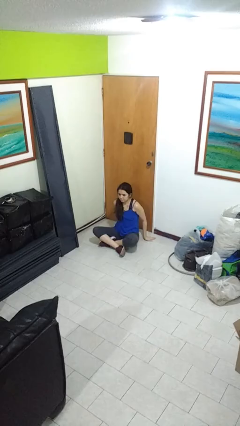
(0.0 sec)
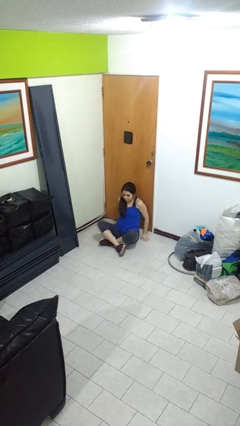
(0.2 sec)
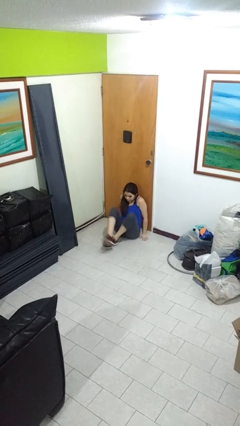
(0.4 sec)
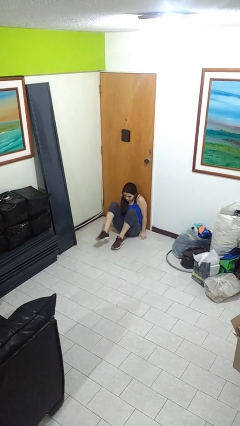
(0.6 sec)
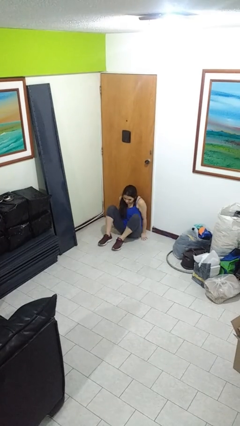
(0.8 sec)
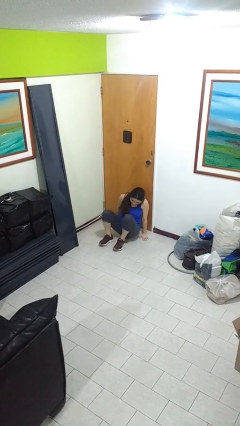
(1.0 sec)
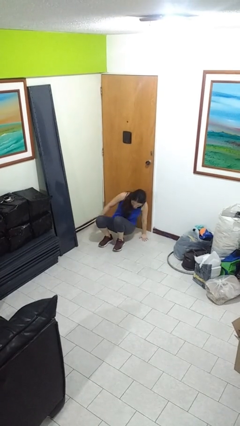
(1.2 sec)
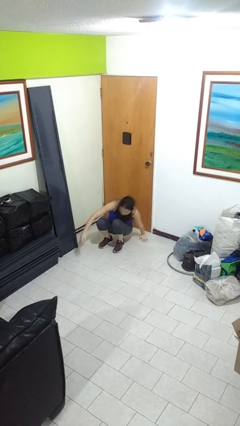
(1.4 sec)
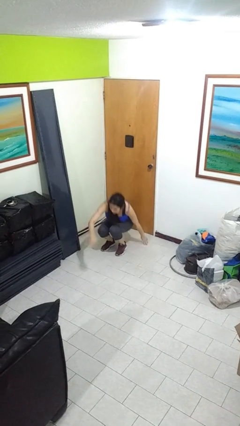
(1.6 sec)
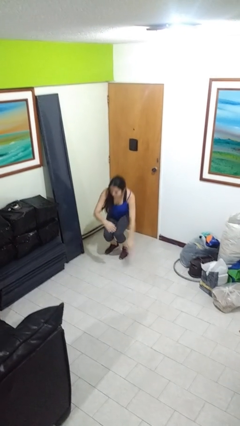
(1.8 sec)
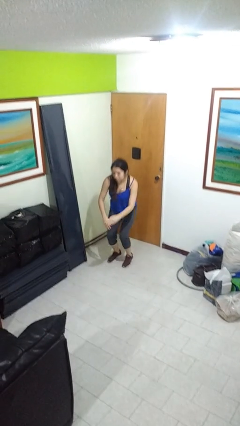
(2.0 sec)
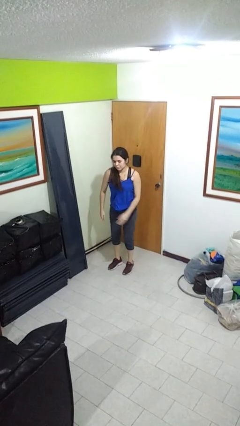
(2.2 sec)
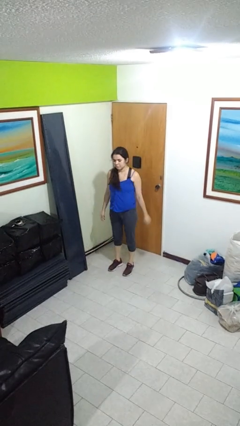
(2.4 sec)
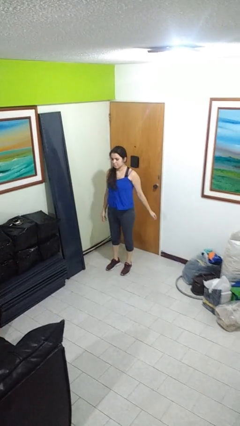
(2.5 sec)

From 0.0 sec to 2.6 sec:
person stands up from floor

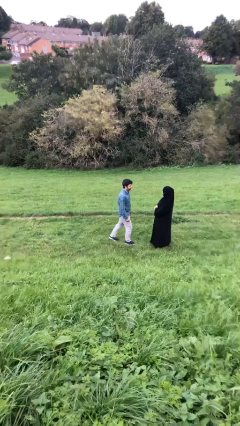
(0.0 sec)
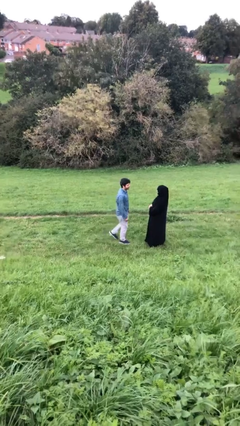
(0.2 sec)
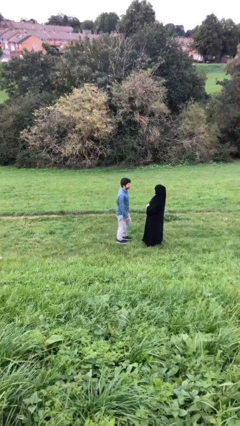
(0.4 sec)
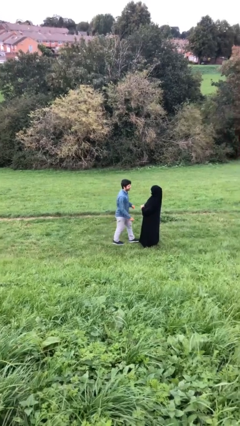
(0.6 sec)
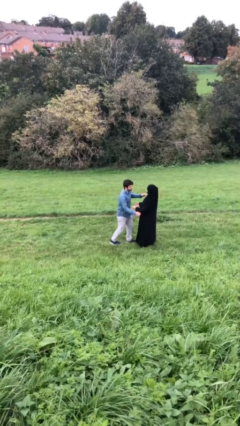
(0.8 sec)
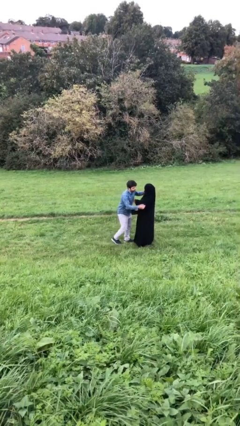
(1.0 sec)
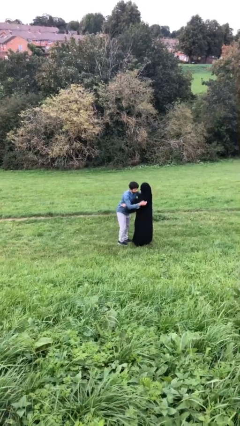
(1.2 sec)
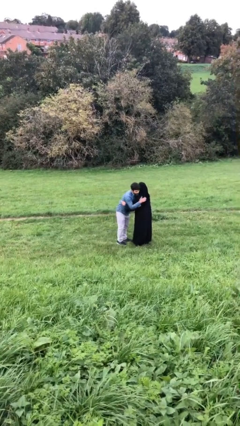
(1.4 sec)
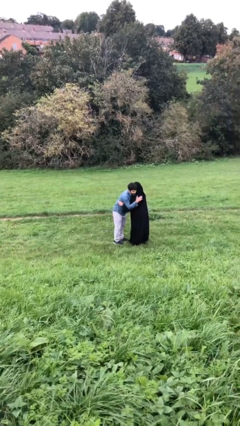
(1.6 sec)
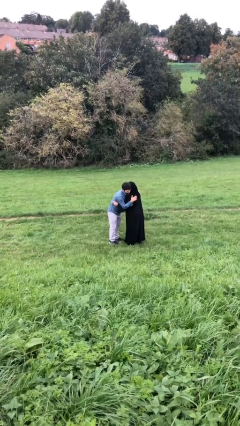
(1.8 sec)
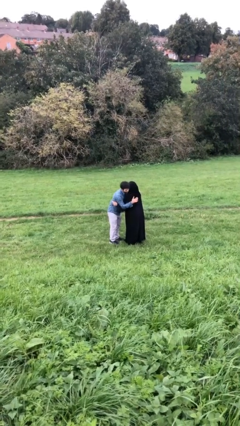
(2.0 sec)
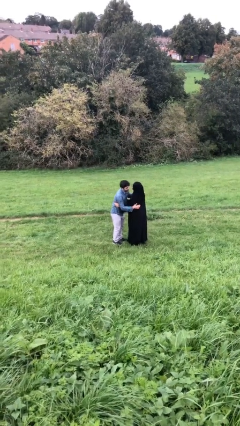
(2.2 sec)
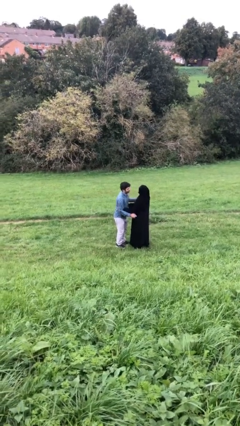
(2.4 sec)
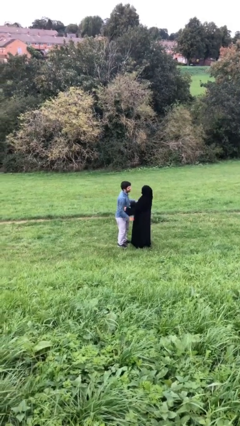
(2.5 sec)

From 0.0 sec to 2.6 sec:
person embraces person

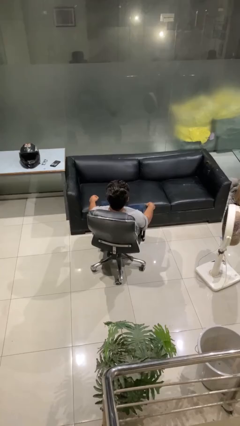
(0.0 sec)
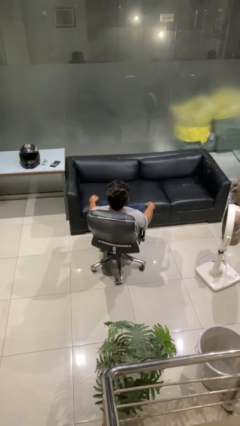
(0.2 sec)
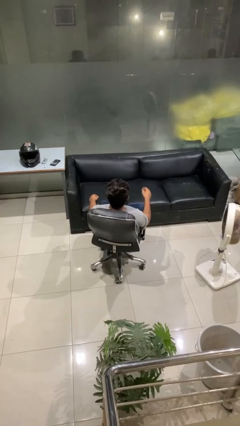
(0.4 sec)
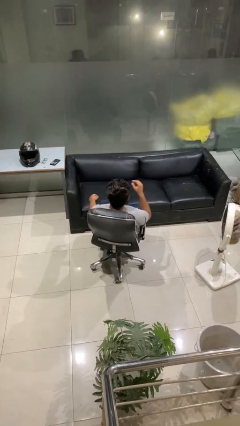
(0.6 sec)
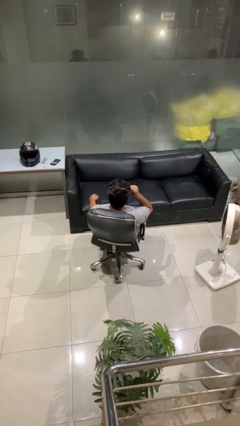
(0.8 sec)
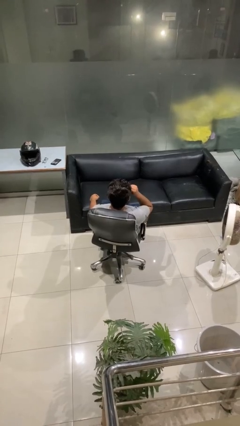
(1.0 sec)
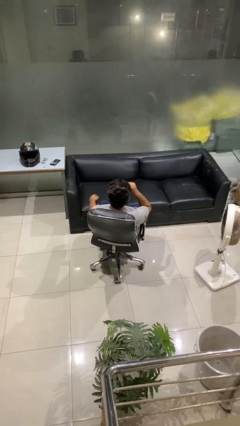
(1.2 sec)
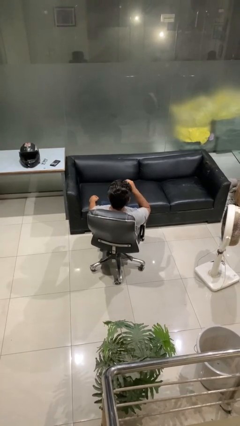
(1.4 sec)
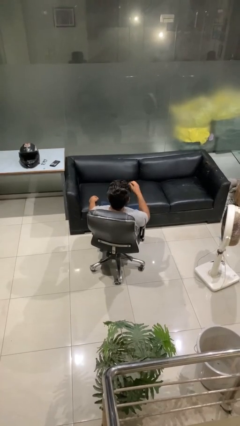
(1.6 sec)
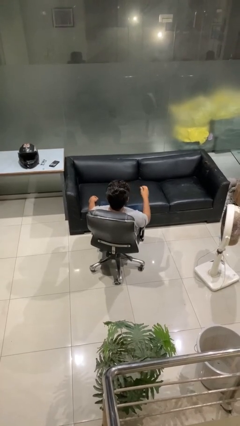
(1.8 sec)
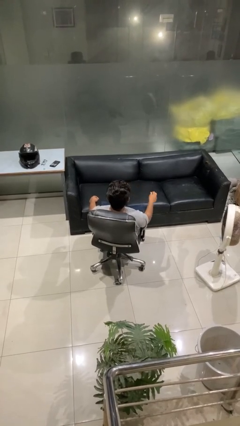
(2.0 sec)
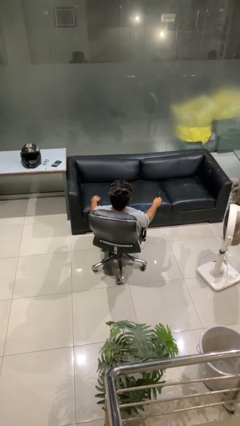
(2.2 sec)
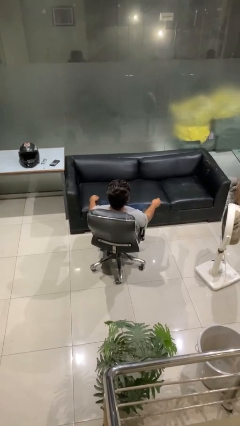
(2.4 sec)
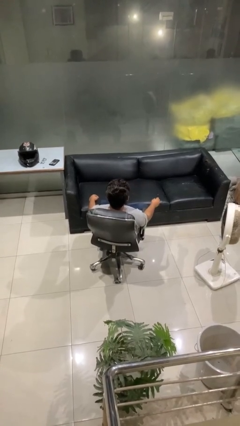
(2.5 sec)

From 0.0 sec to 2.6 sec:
person takes off sunglasses

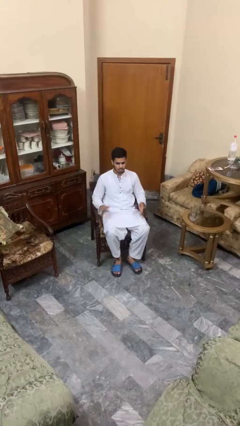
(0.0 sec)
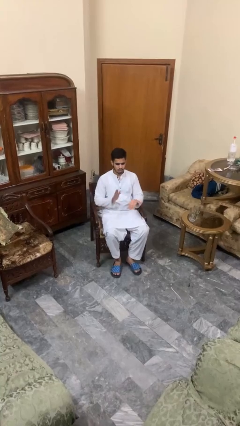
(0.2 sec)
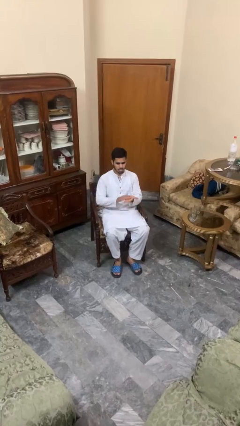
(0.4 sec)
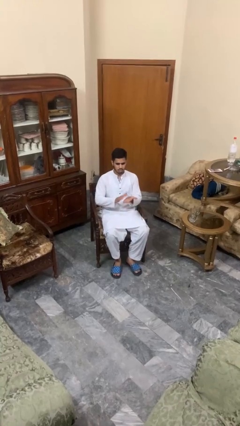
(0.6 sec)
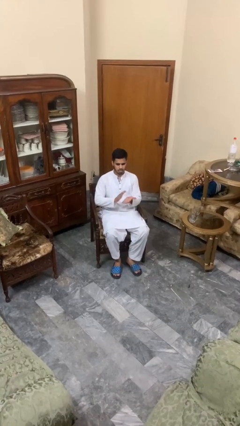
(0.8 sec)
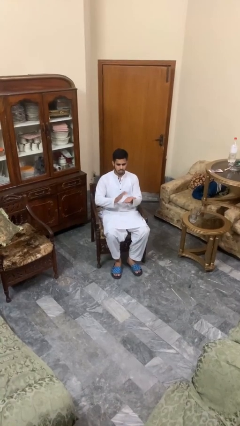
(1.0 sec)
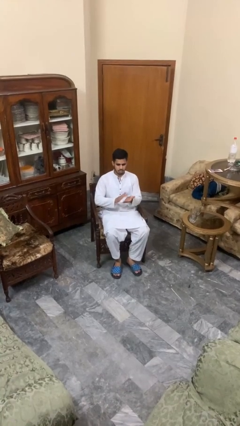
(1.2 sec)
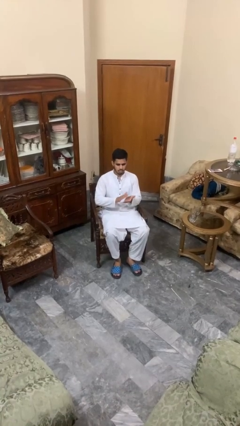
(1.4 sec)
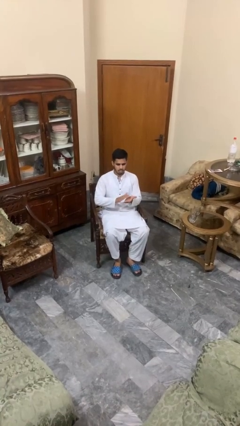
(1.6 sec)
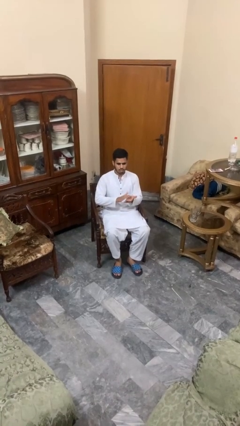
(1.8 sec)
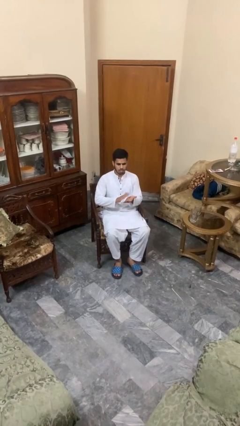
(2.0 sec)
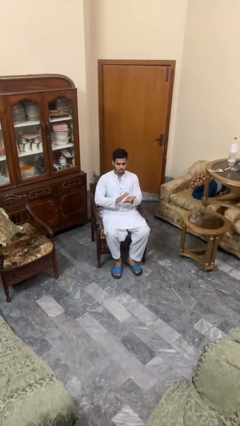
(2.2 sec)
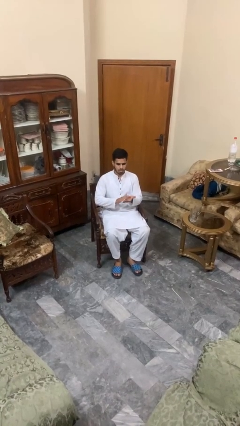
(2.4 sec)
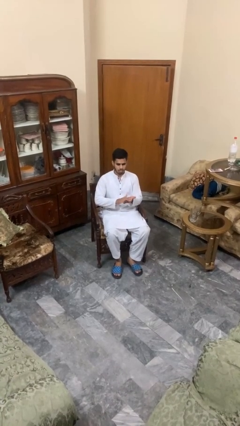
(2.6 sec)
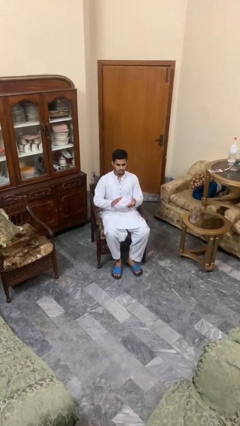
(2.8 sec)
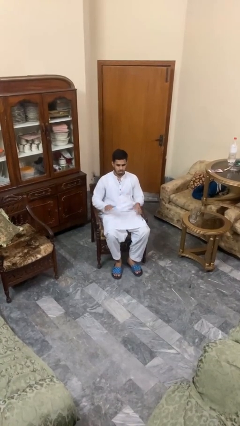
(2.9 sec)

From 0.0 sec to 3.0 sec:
person claps hands

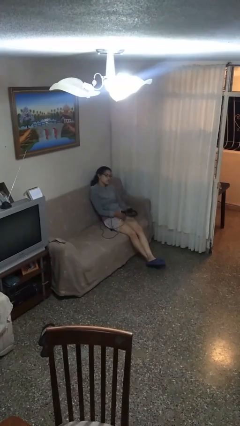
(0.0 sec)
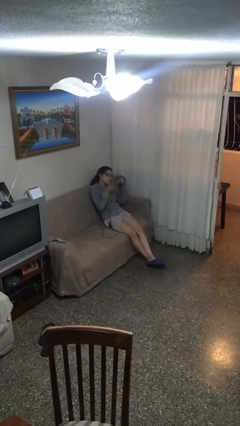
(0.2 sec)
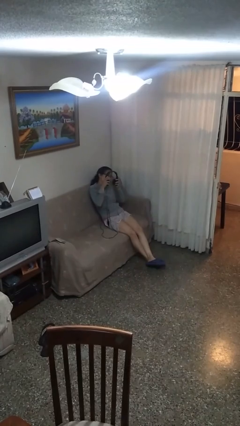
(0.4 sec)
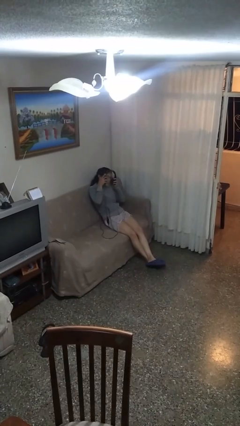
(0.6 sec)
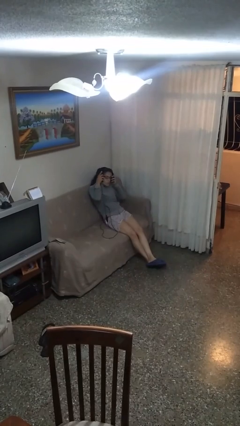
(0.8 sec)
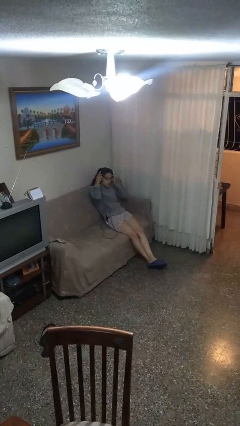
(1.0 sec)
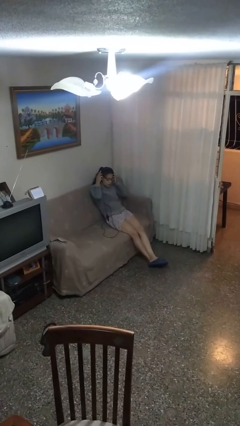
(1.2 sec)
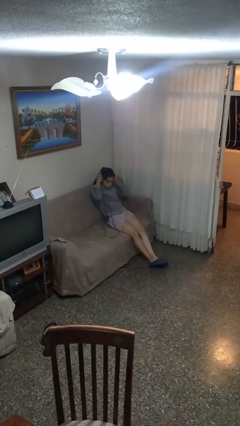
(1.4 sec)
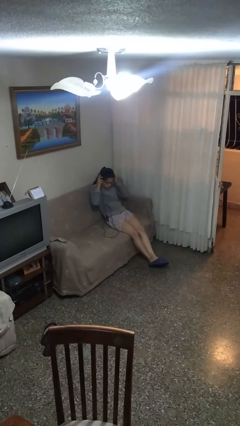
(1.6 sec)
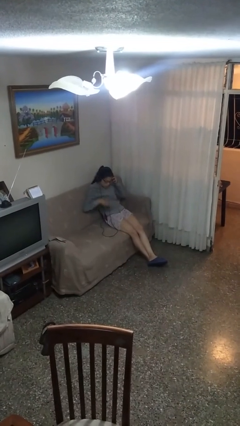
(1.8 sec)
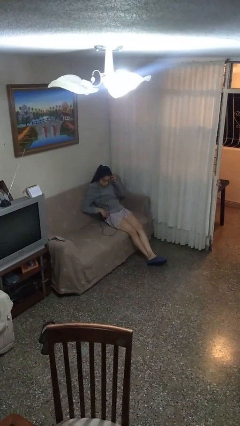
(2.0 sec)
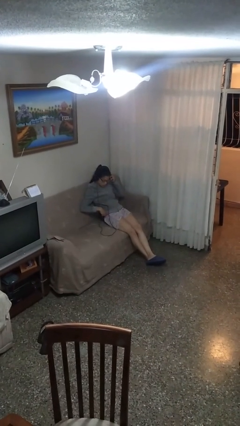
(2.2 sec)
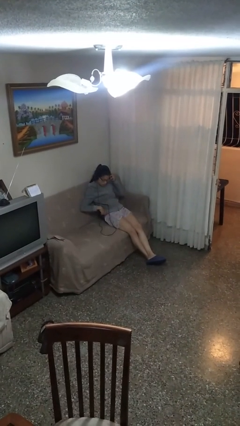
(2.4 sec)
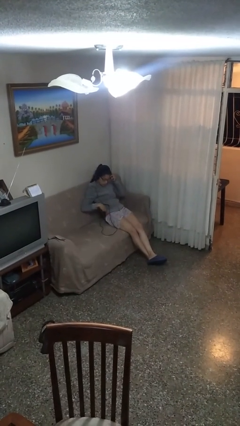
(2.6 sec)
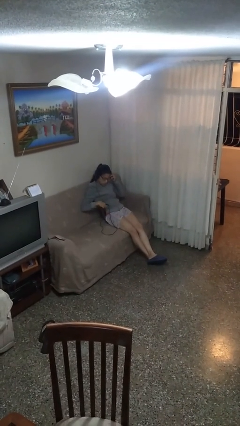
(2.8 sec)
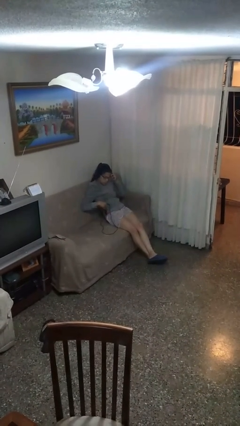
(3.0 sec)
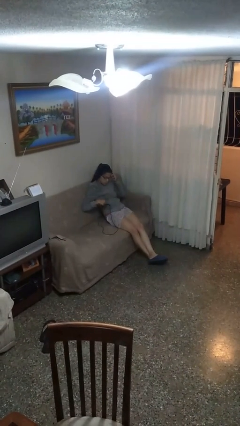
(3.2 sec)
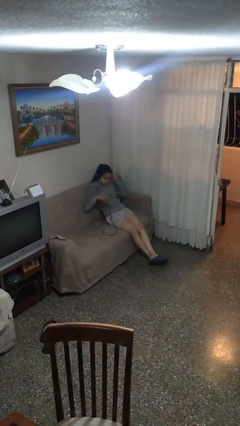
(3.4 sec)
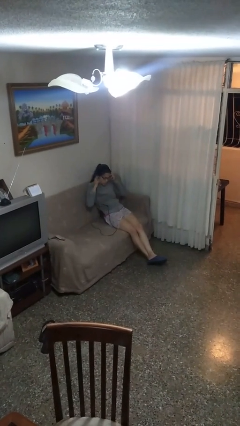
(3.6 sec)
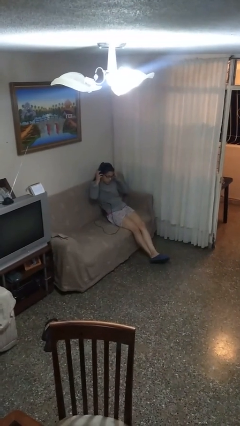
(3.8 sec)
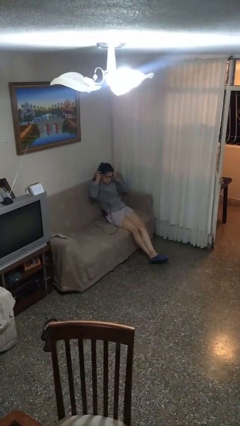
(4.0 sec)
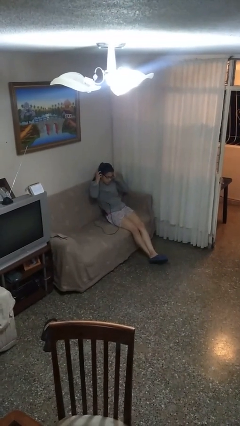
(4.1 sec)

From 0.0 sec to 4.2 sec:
person puts on headphones

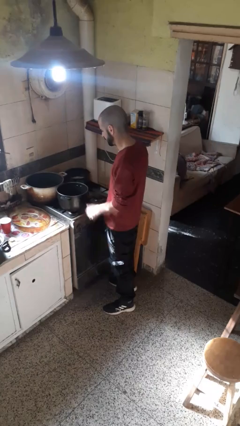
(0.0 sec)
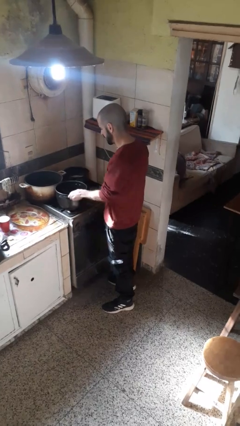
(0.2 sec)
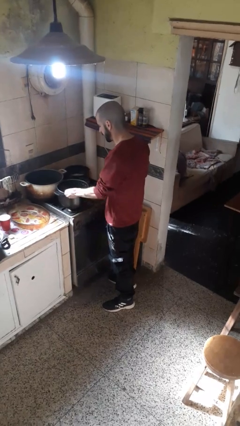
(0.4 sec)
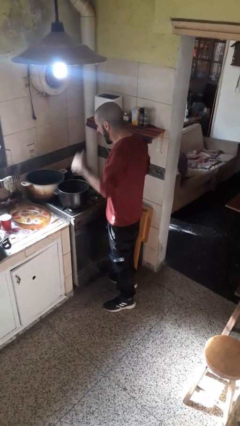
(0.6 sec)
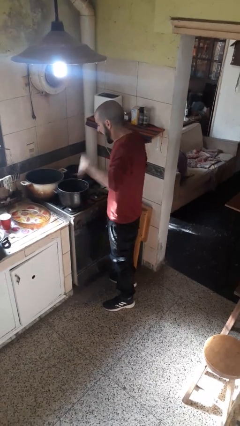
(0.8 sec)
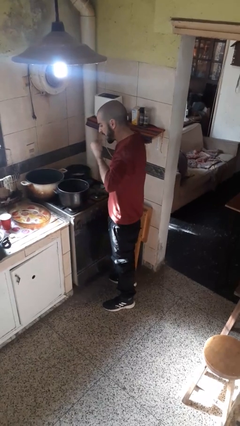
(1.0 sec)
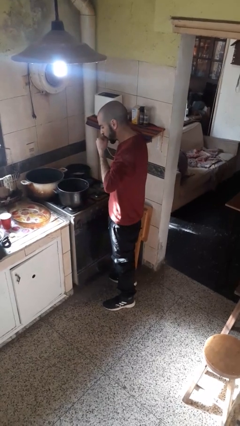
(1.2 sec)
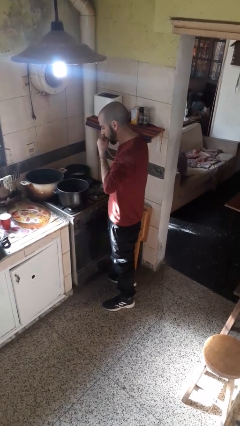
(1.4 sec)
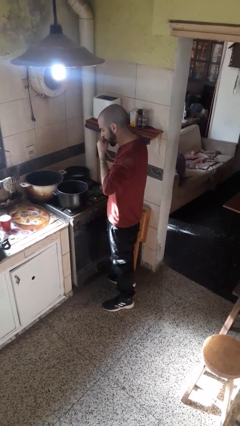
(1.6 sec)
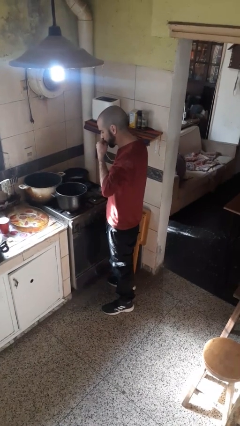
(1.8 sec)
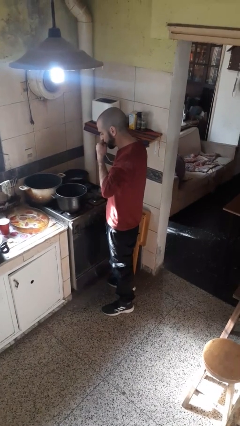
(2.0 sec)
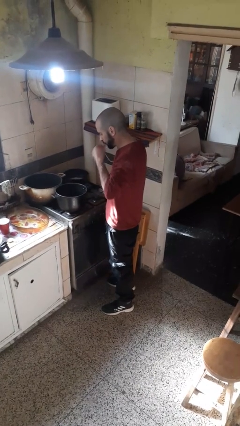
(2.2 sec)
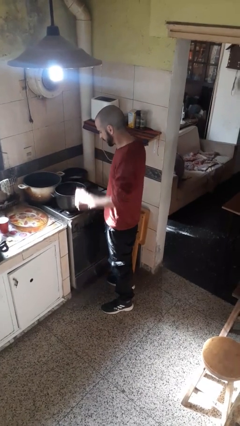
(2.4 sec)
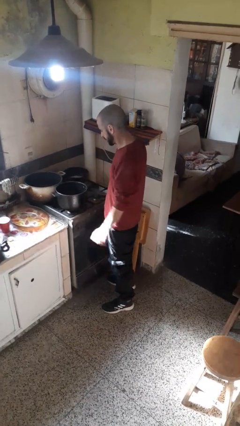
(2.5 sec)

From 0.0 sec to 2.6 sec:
person burns hand
